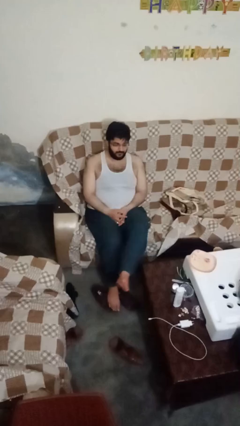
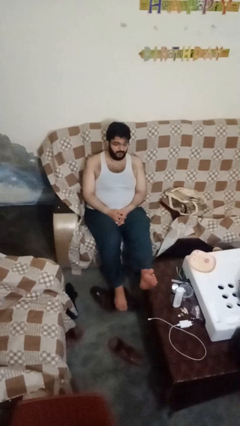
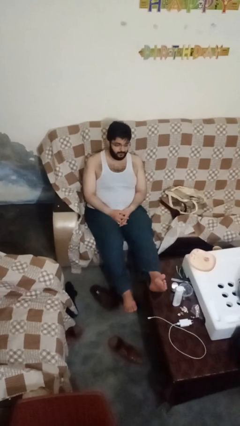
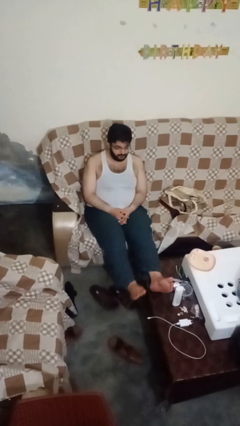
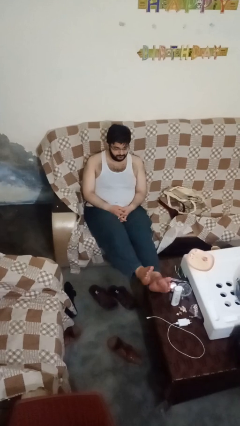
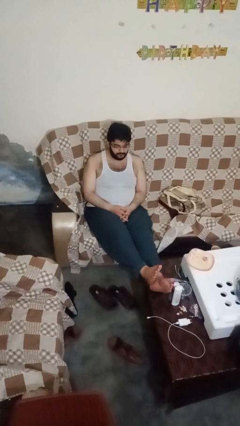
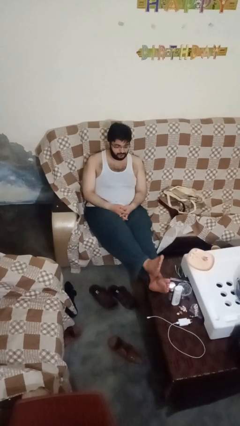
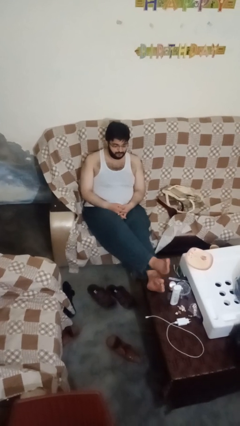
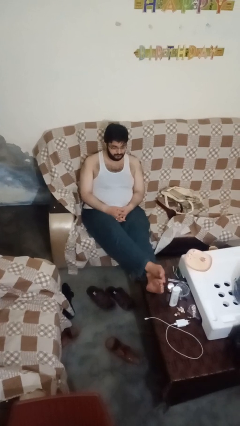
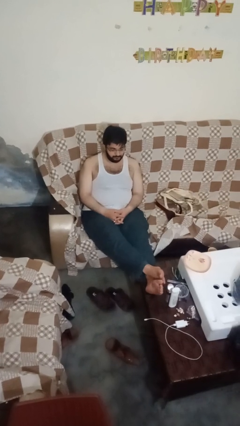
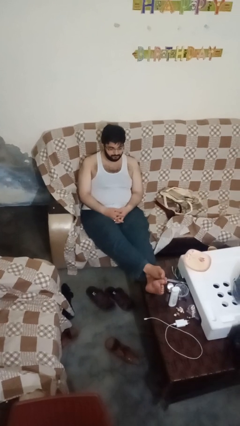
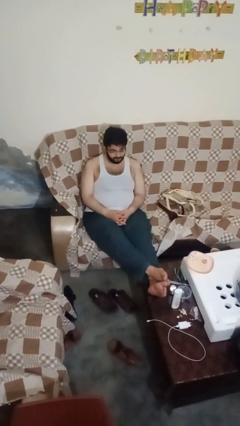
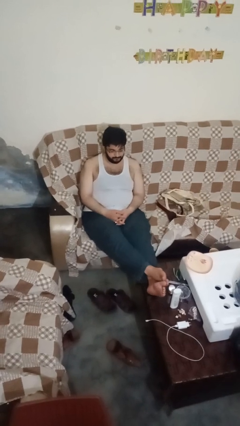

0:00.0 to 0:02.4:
person puts feet up

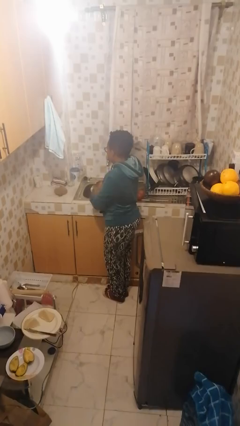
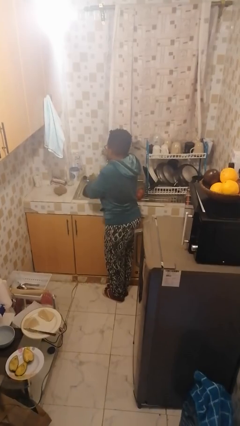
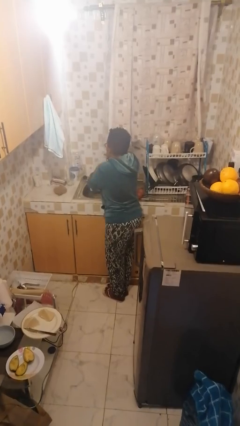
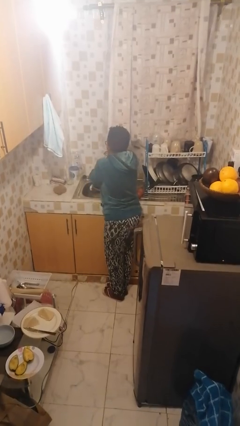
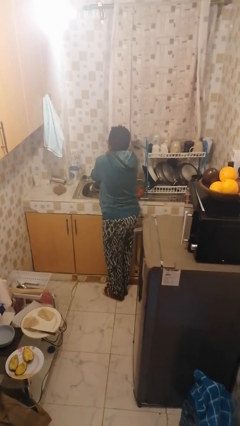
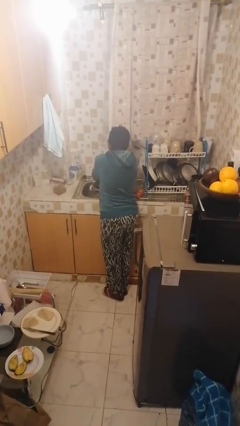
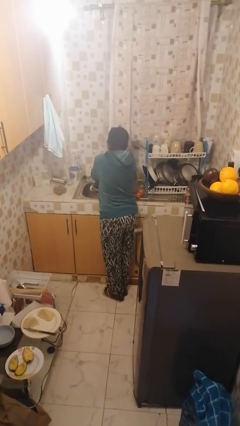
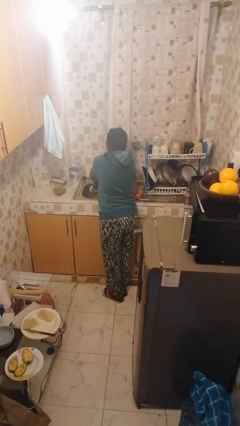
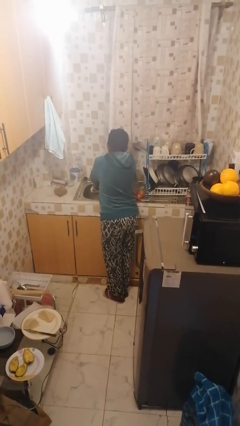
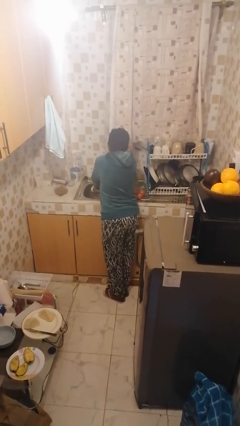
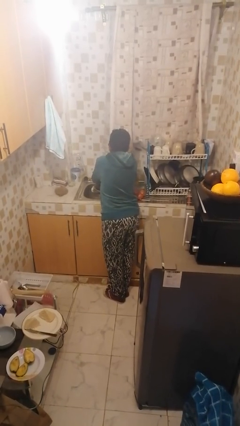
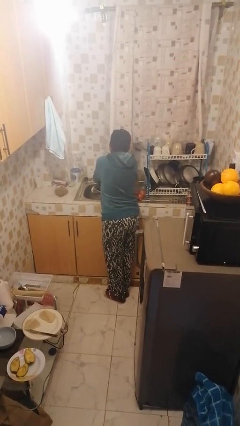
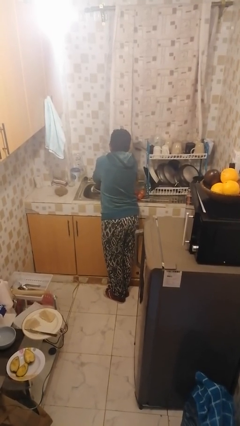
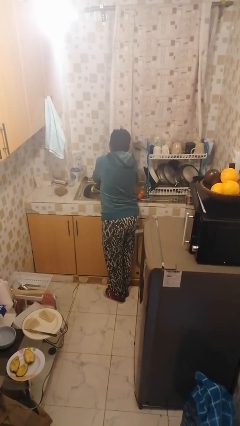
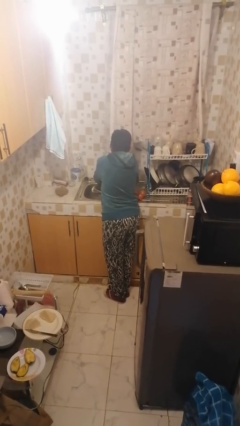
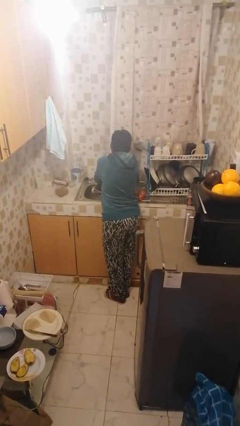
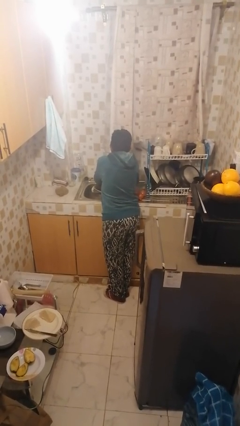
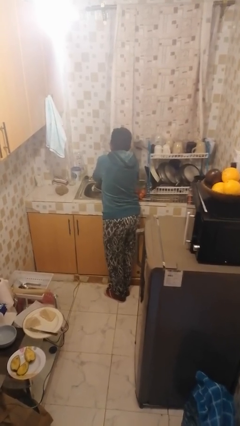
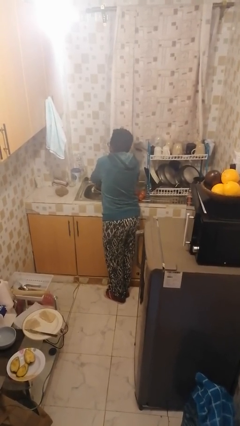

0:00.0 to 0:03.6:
person washes hands

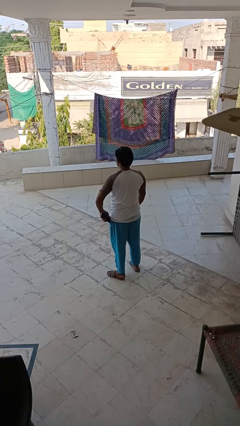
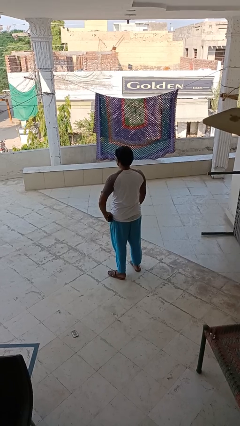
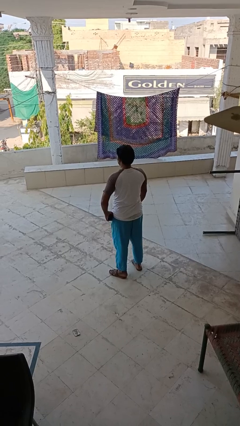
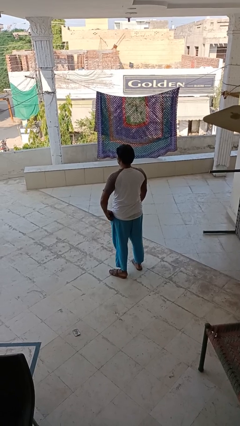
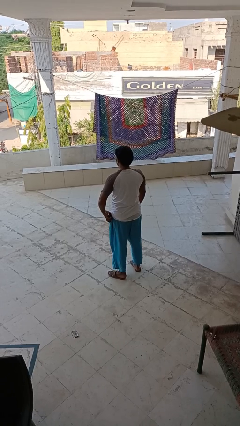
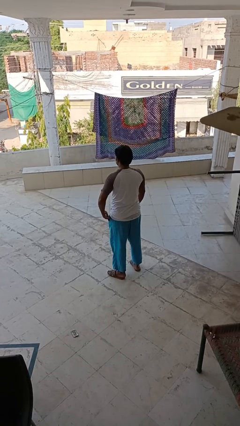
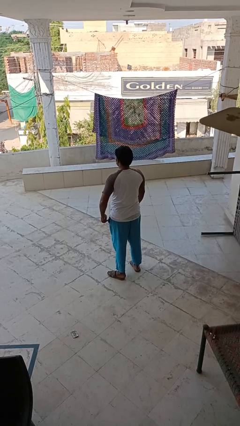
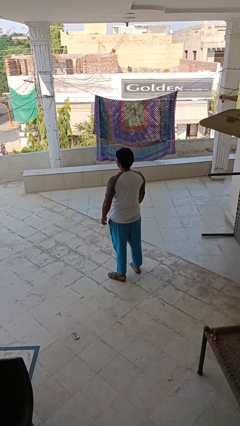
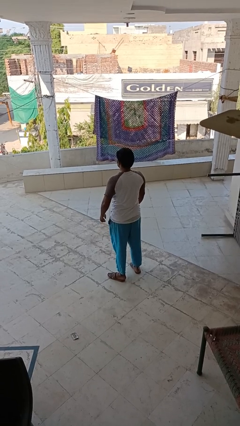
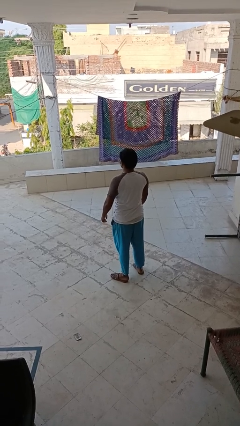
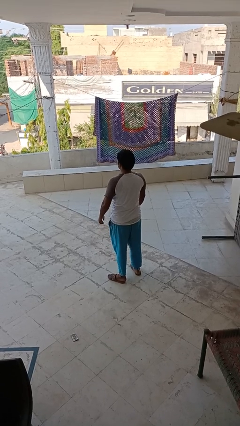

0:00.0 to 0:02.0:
person puts phone into pocket

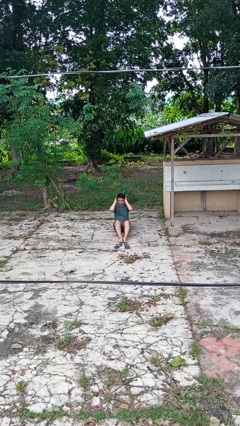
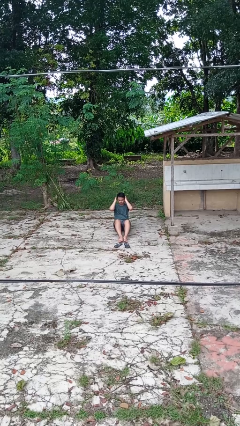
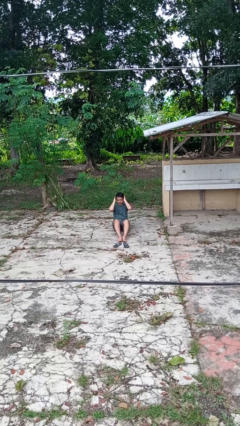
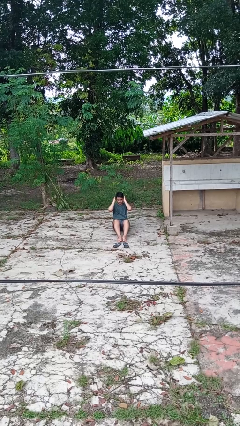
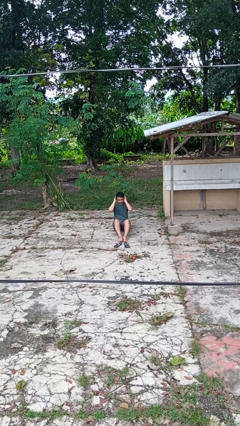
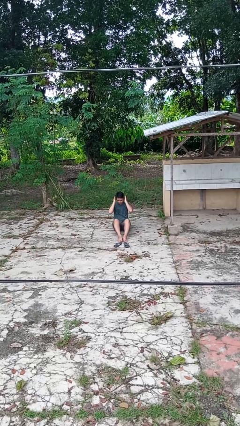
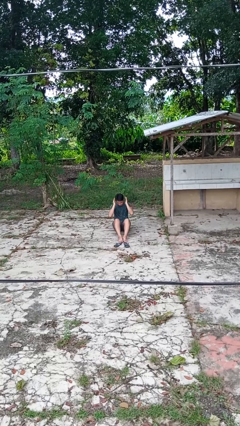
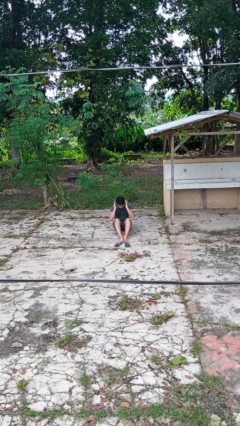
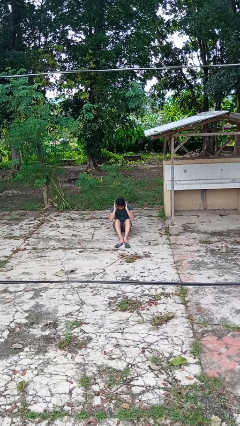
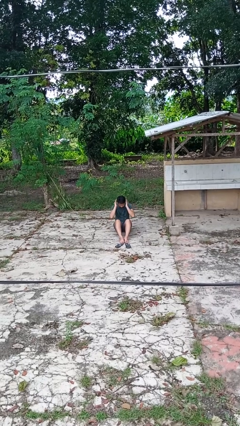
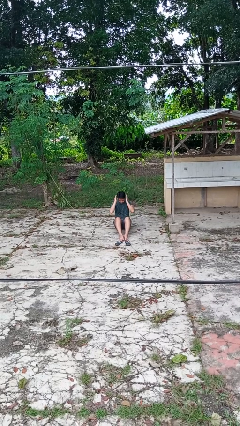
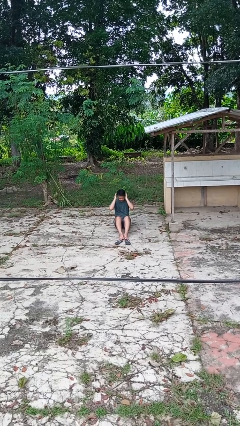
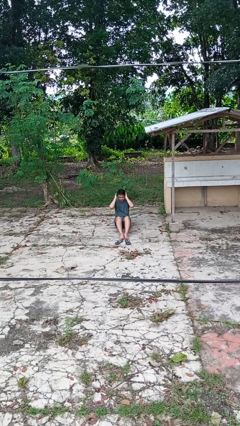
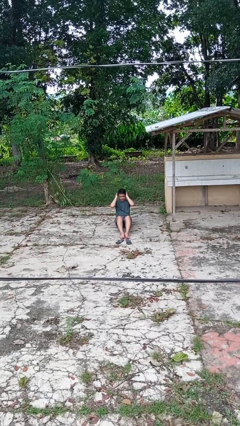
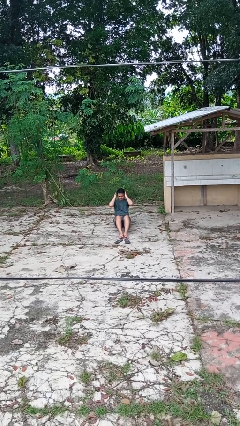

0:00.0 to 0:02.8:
person exercises with situp

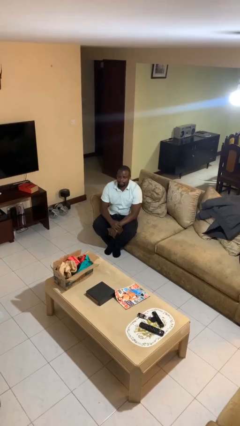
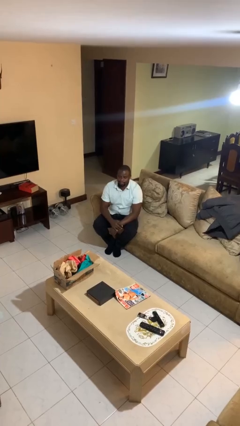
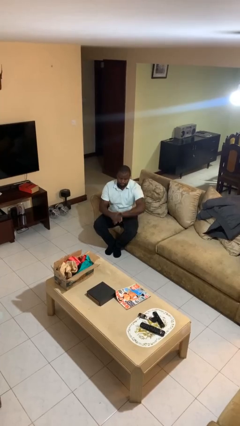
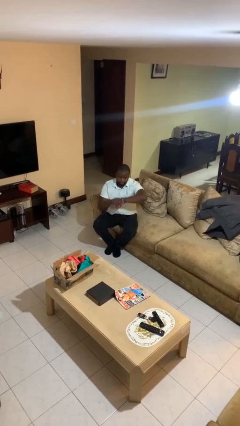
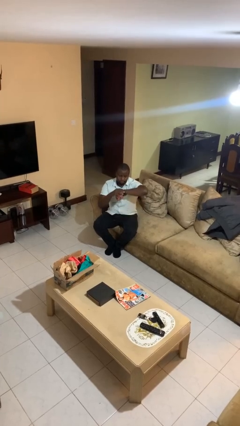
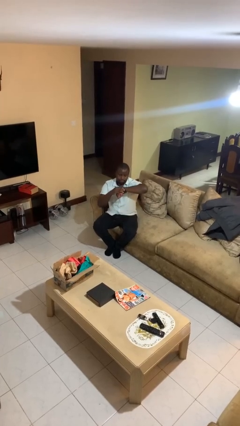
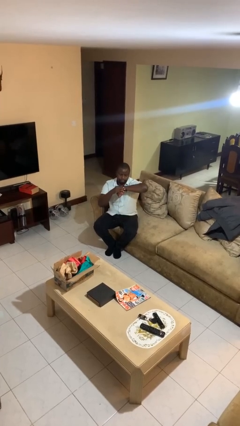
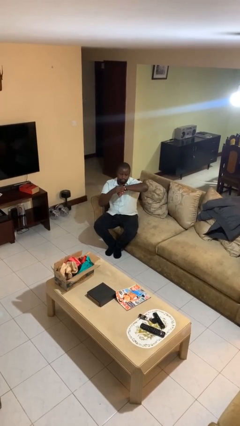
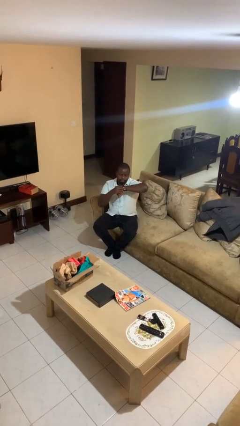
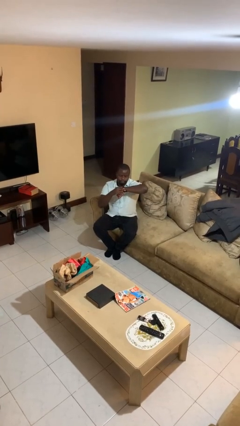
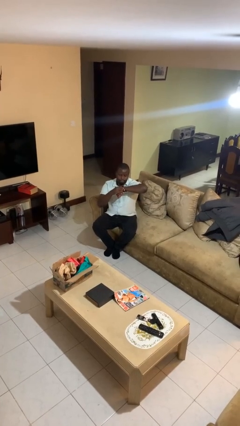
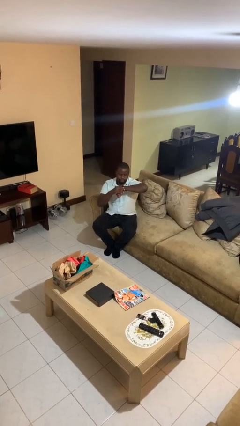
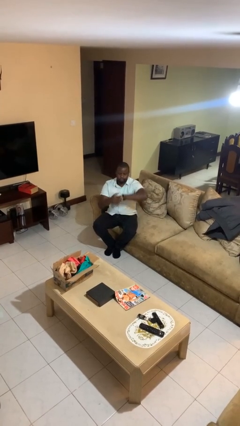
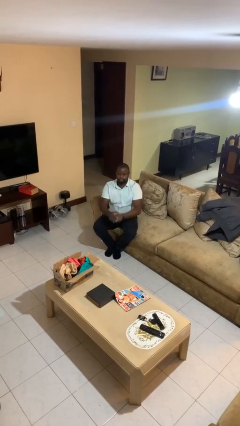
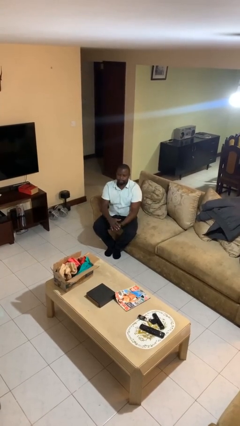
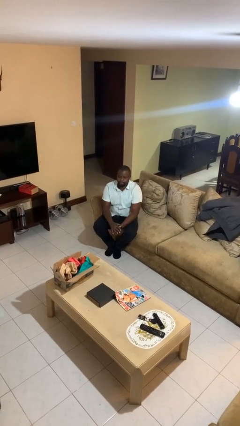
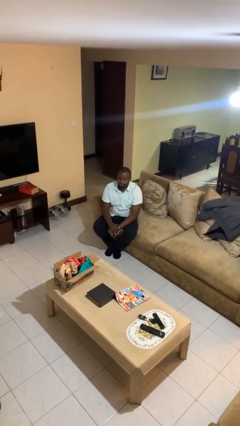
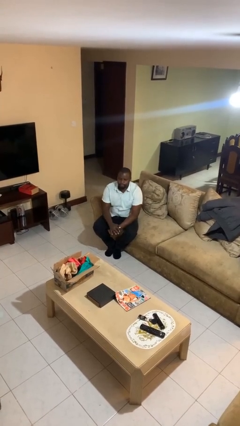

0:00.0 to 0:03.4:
person looks at wristwatch

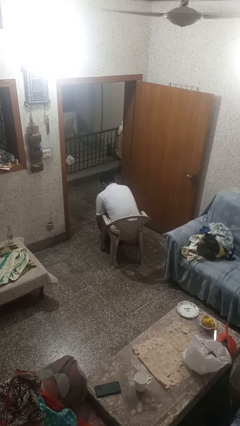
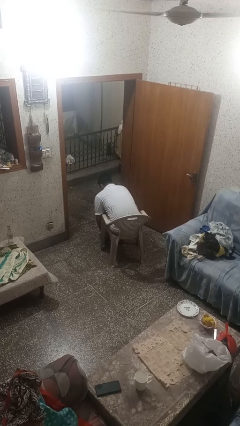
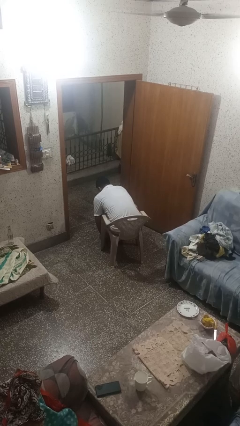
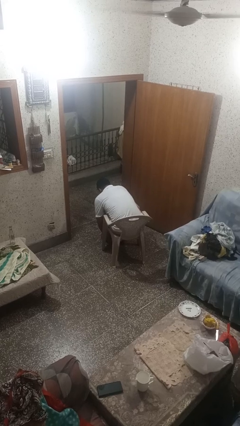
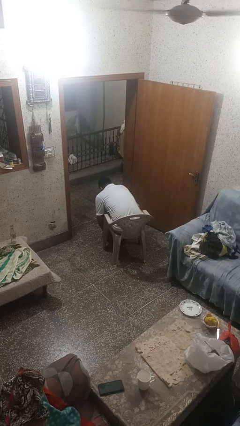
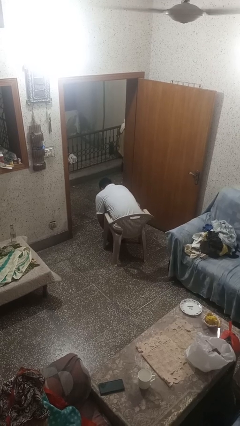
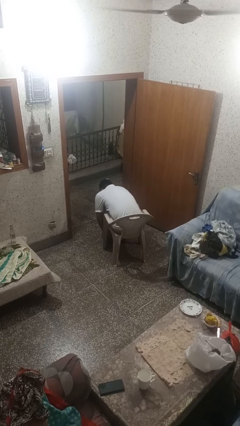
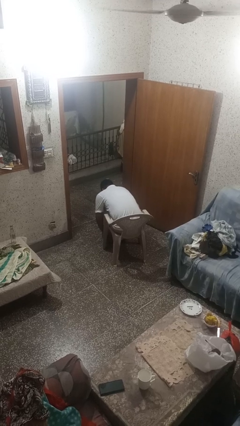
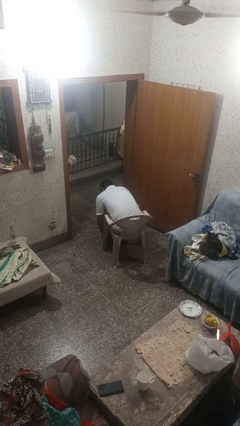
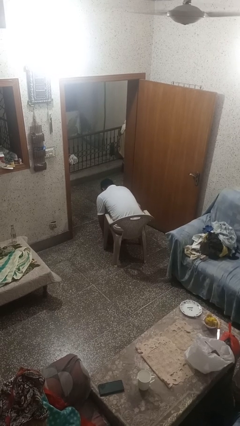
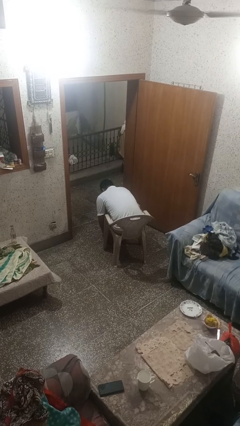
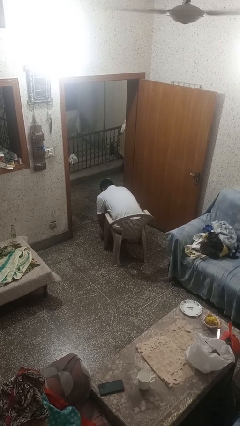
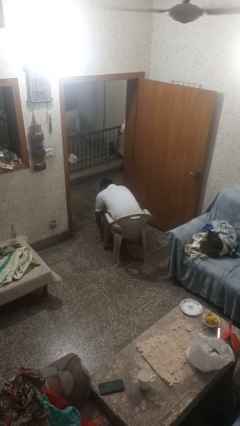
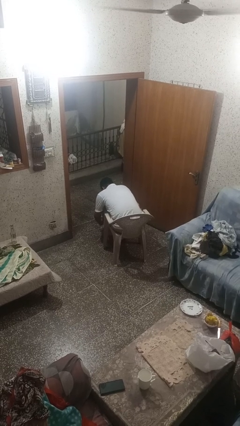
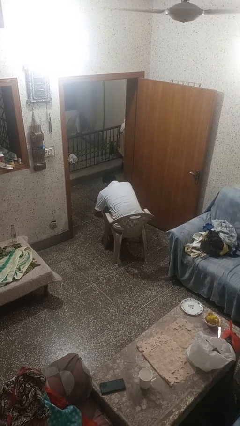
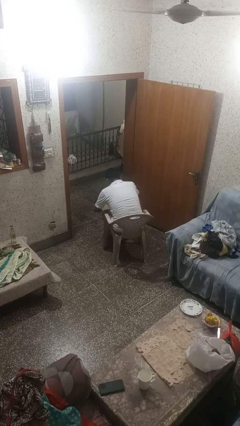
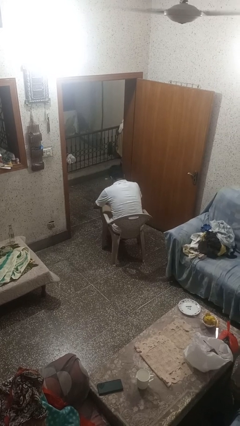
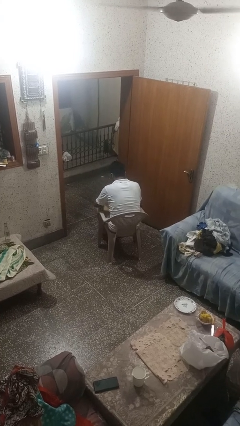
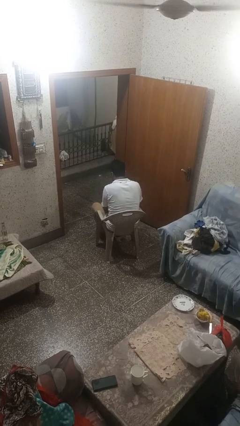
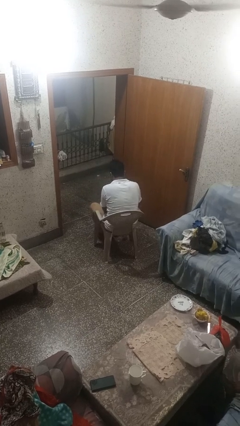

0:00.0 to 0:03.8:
person takes off socks
